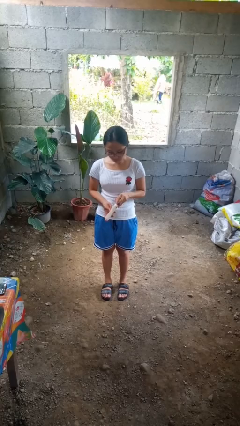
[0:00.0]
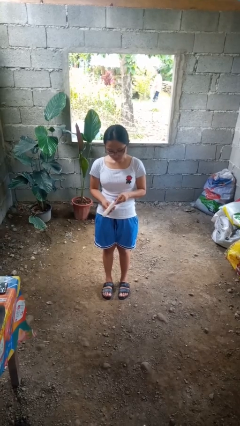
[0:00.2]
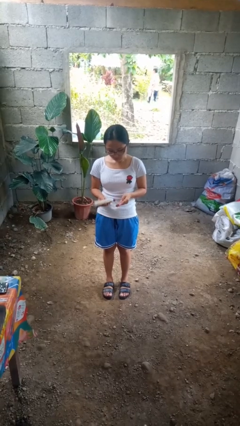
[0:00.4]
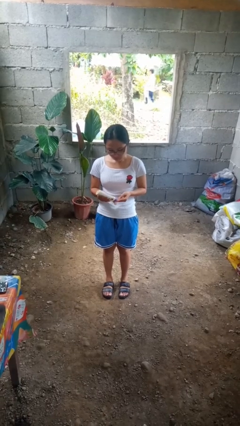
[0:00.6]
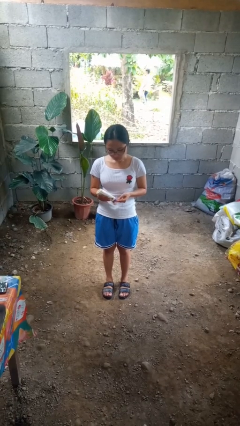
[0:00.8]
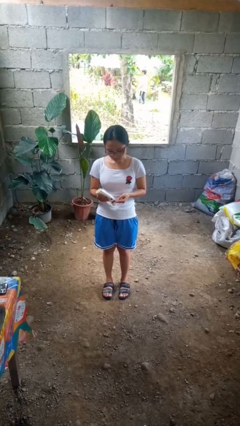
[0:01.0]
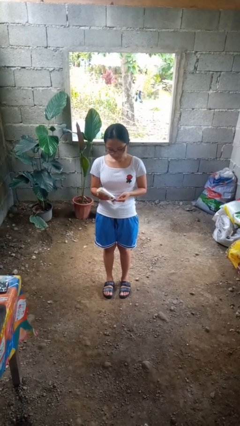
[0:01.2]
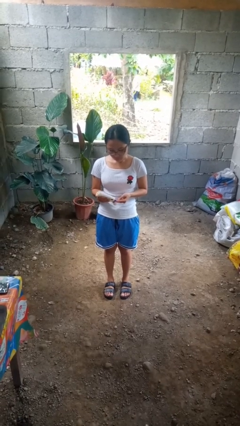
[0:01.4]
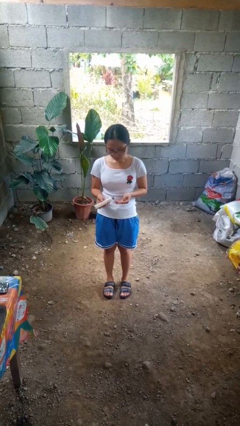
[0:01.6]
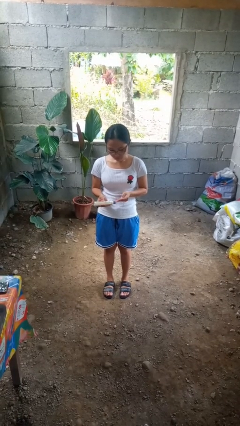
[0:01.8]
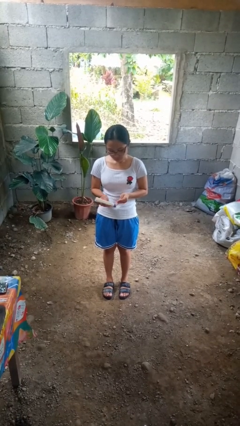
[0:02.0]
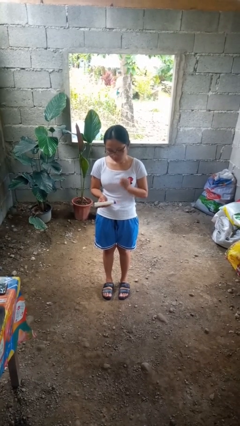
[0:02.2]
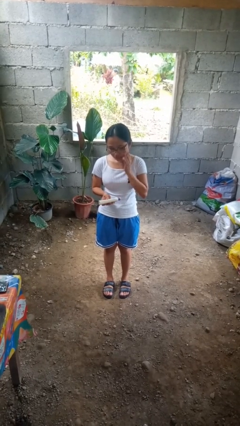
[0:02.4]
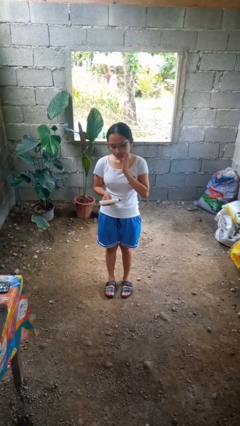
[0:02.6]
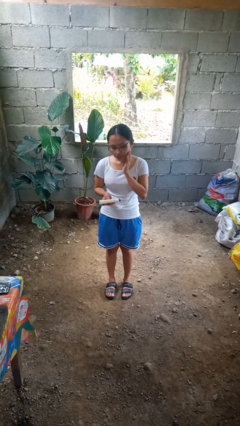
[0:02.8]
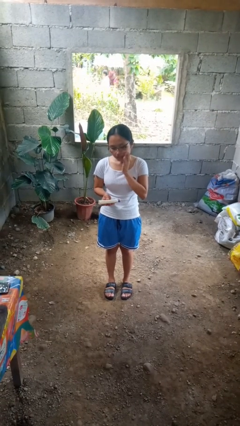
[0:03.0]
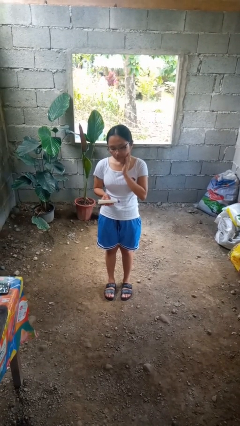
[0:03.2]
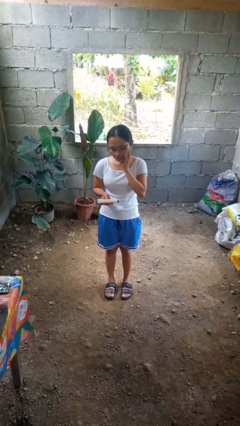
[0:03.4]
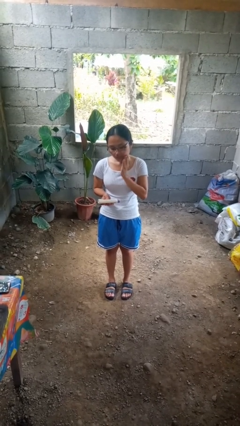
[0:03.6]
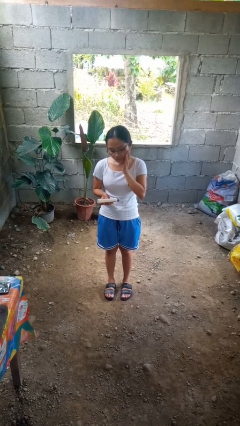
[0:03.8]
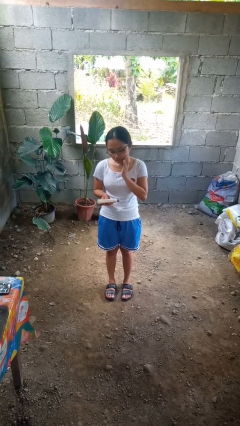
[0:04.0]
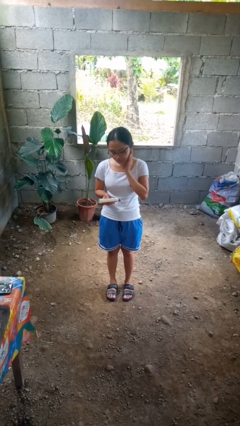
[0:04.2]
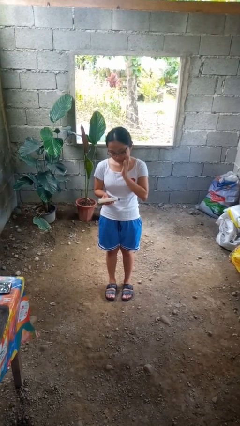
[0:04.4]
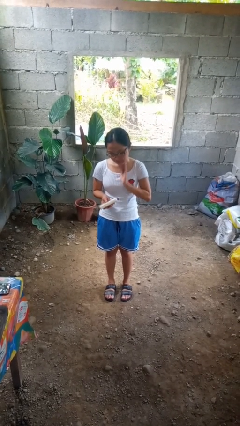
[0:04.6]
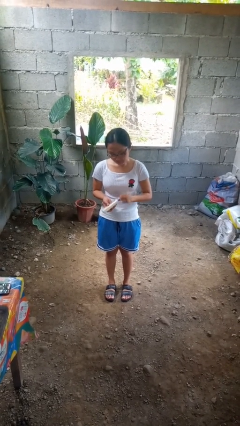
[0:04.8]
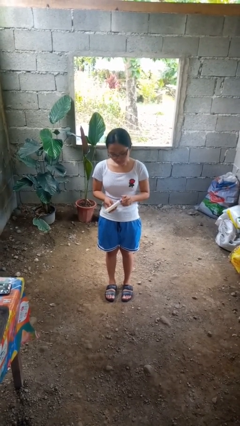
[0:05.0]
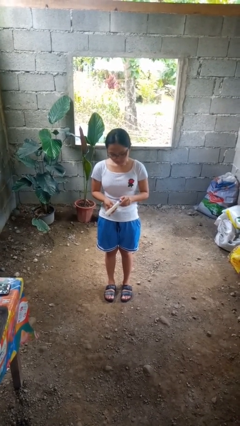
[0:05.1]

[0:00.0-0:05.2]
person applies sunscreen

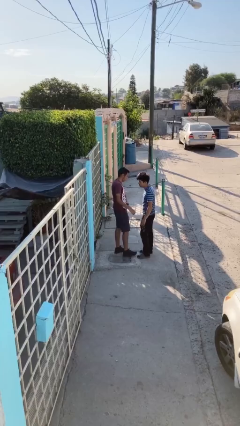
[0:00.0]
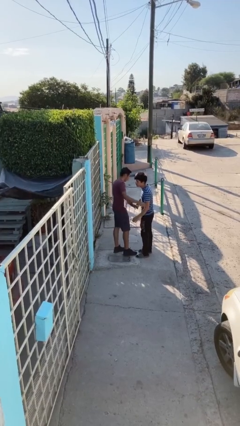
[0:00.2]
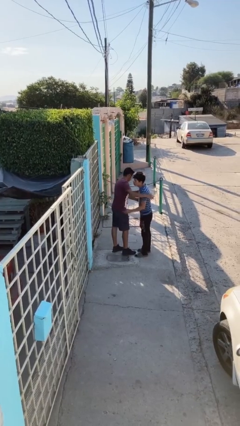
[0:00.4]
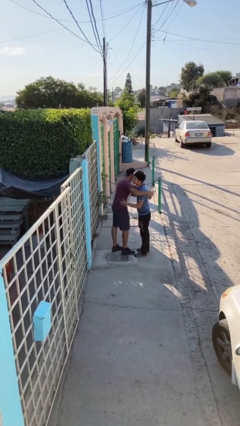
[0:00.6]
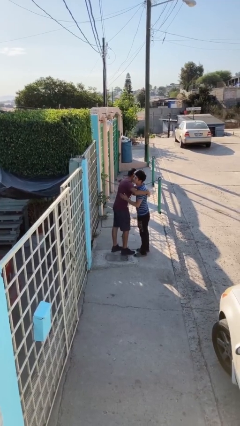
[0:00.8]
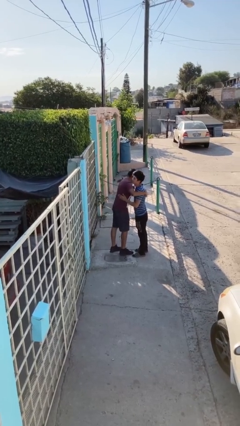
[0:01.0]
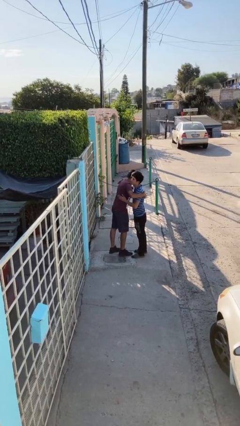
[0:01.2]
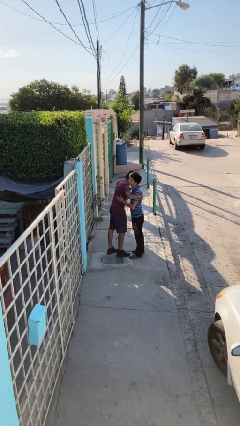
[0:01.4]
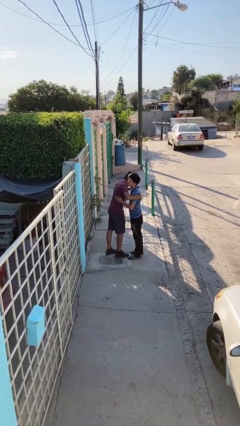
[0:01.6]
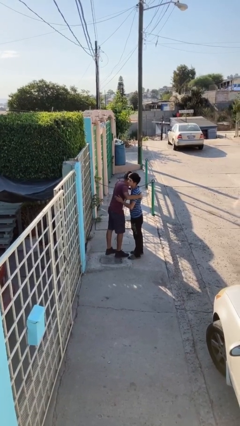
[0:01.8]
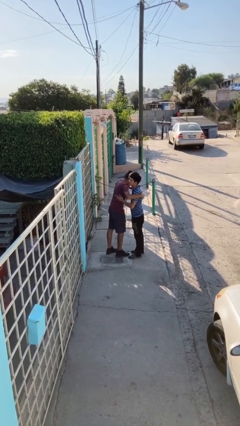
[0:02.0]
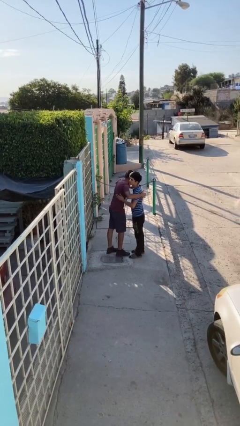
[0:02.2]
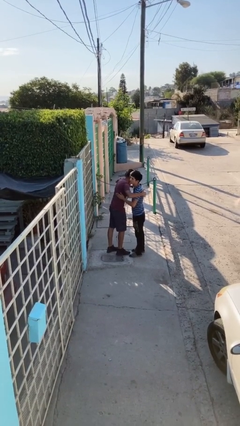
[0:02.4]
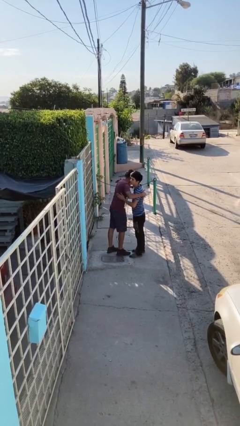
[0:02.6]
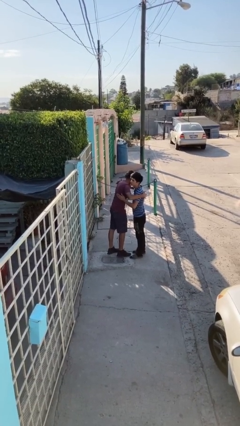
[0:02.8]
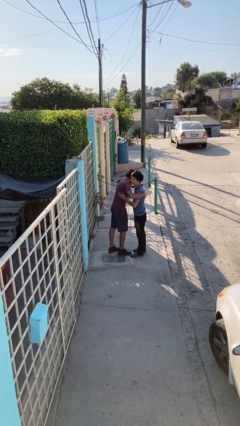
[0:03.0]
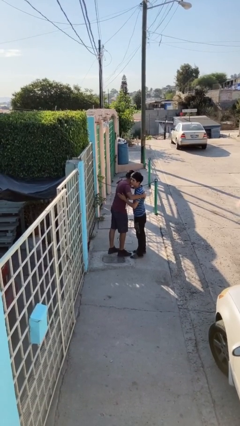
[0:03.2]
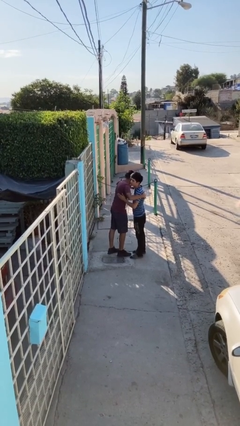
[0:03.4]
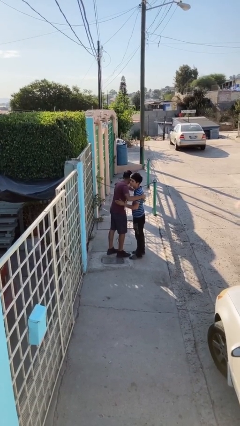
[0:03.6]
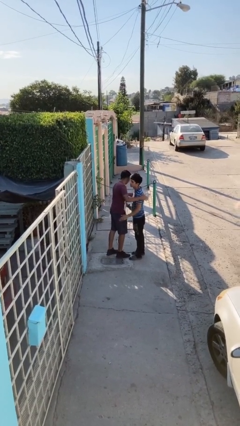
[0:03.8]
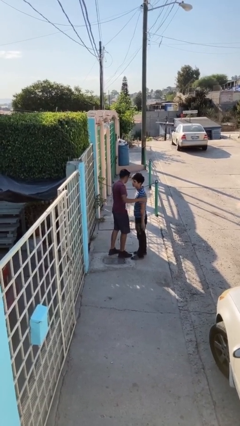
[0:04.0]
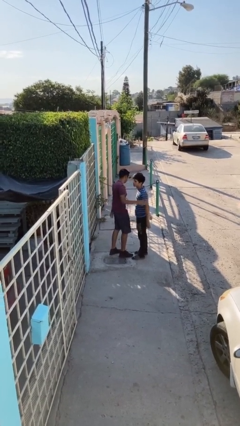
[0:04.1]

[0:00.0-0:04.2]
person embraces person

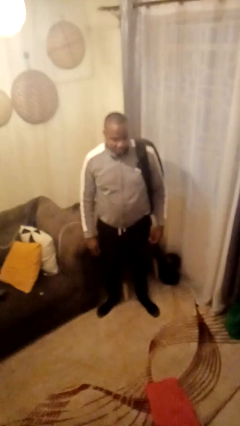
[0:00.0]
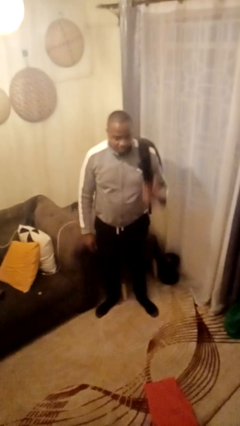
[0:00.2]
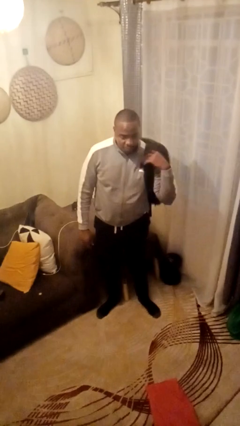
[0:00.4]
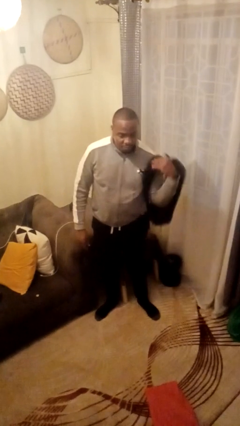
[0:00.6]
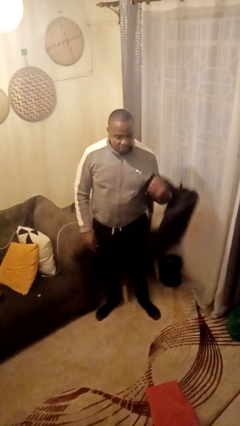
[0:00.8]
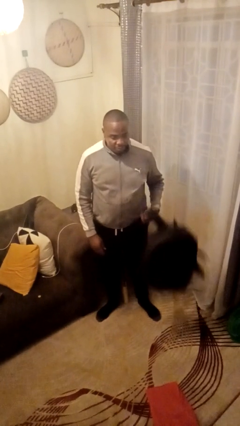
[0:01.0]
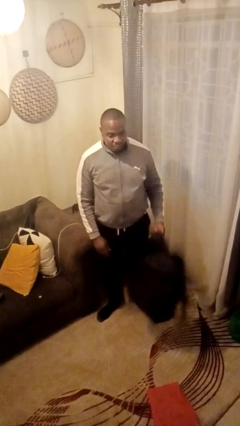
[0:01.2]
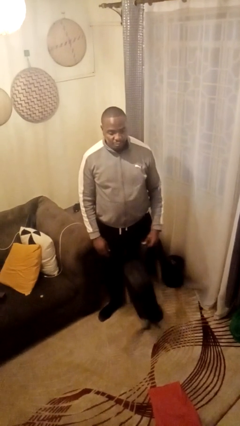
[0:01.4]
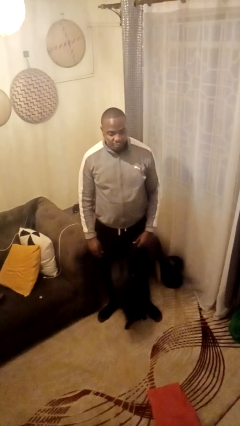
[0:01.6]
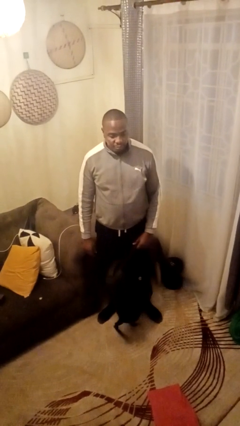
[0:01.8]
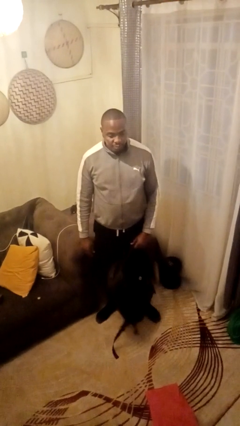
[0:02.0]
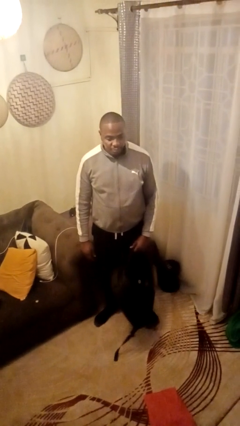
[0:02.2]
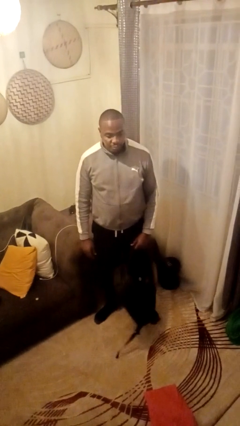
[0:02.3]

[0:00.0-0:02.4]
person takes off backpack

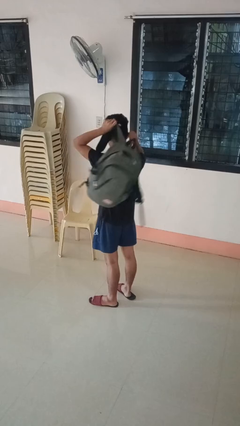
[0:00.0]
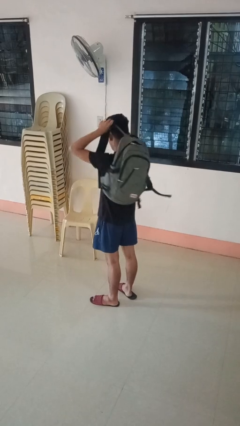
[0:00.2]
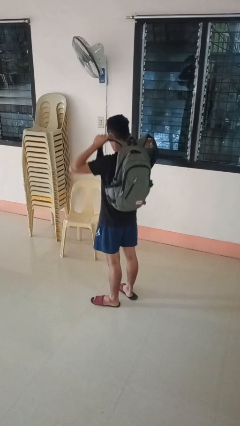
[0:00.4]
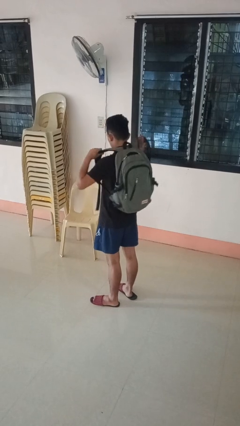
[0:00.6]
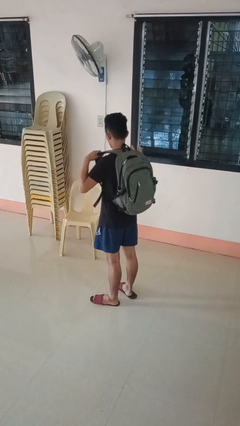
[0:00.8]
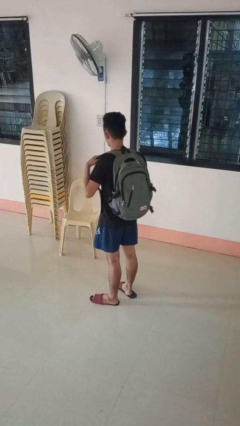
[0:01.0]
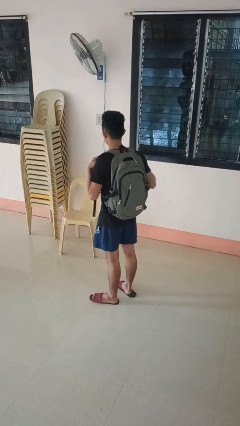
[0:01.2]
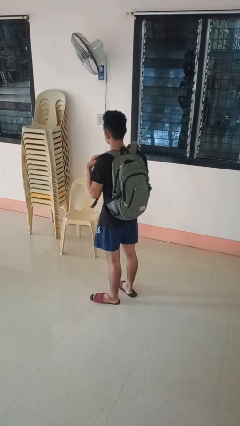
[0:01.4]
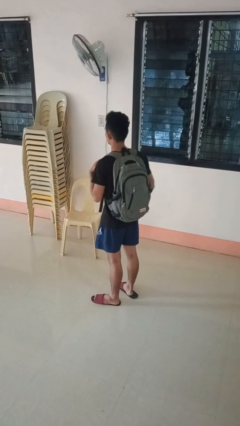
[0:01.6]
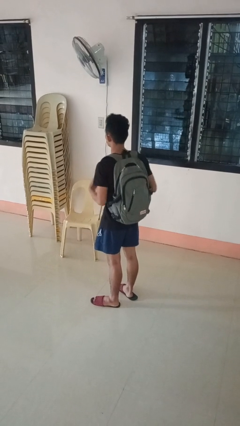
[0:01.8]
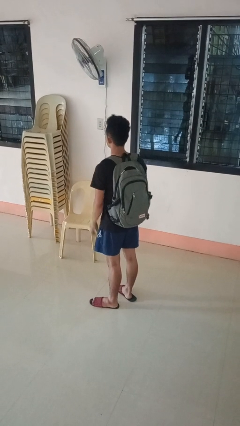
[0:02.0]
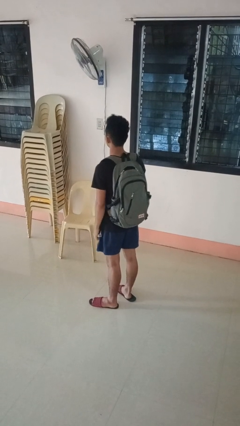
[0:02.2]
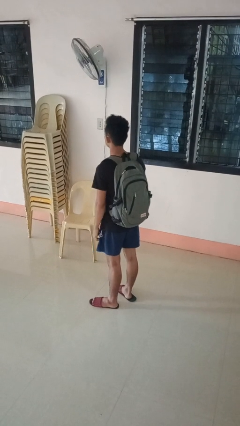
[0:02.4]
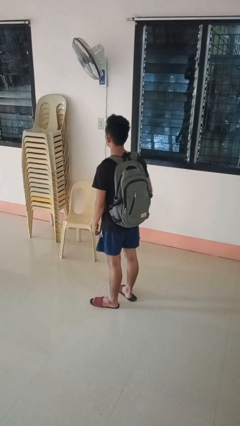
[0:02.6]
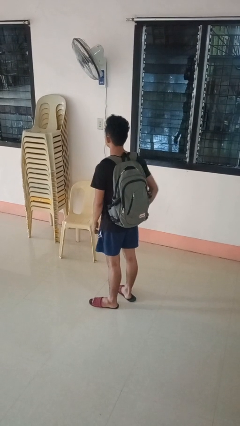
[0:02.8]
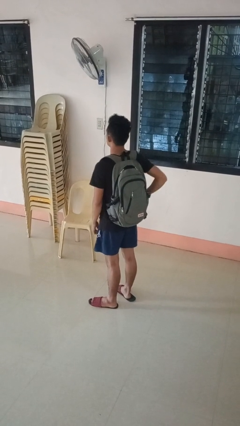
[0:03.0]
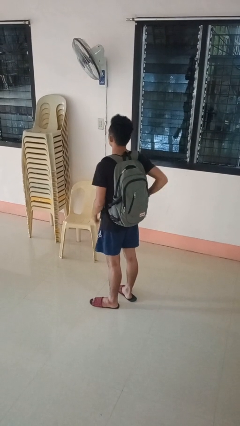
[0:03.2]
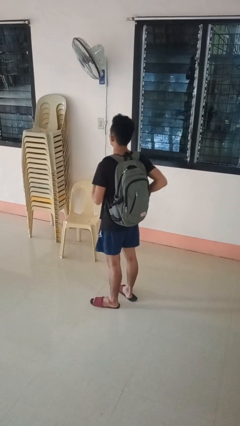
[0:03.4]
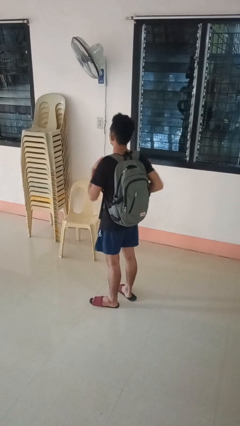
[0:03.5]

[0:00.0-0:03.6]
person puts on backpack

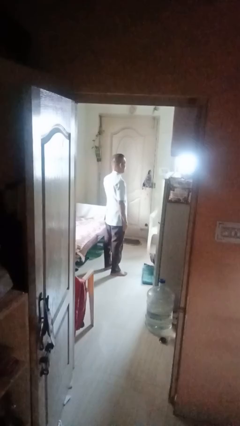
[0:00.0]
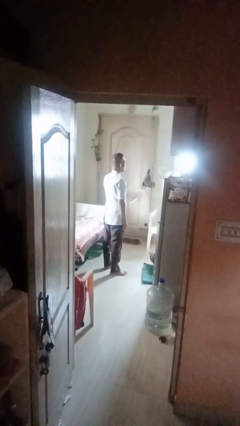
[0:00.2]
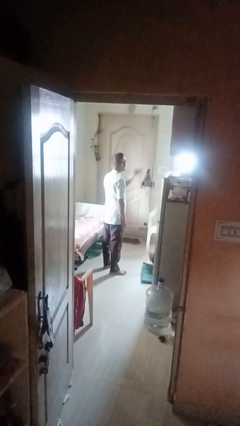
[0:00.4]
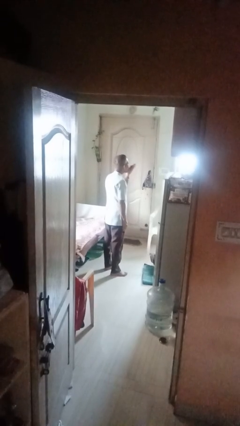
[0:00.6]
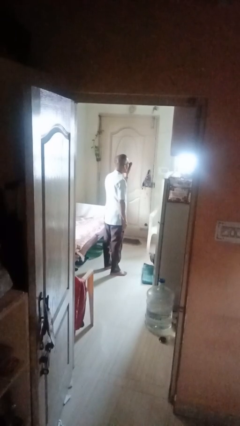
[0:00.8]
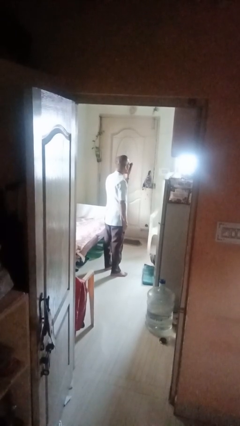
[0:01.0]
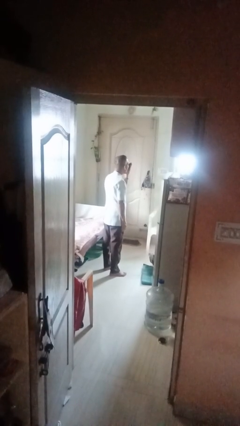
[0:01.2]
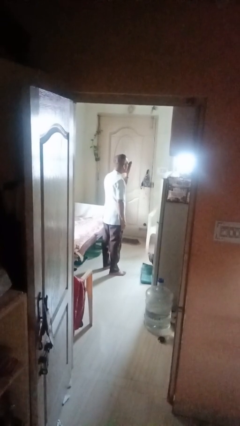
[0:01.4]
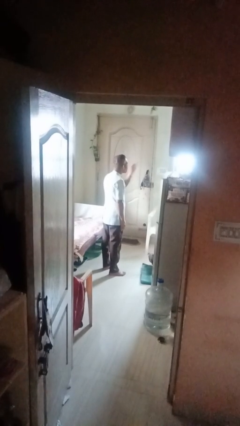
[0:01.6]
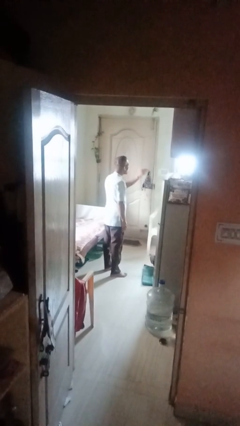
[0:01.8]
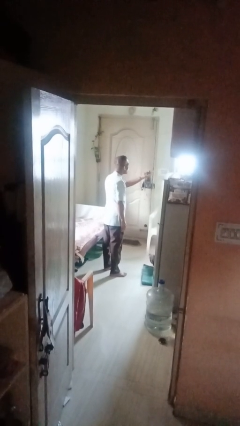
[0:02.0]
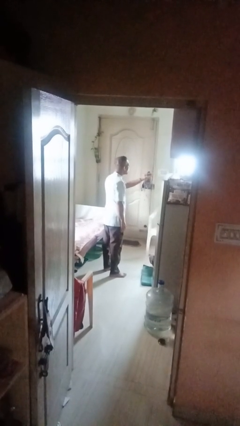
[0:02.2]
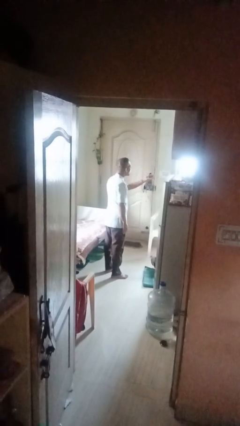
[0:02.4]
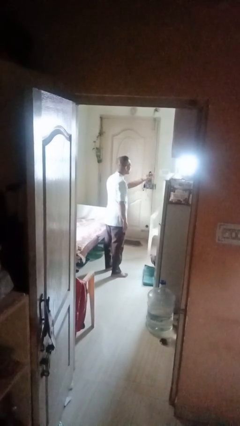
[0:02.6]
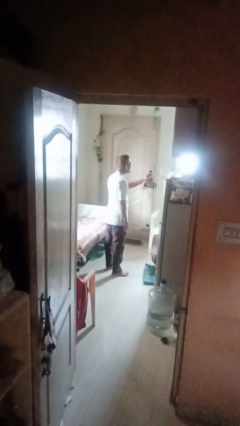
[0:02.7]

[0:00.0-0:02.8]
person gestures blow kiss
